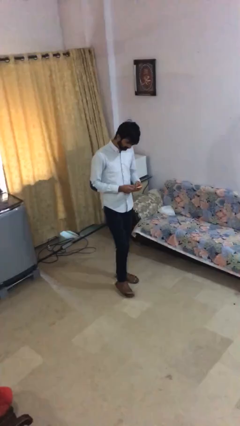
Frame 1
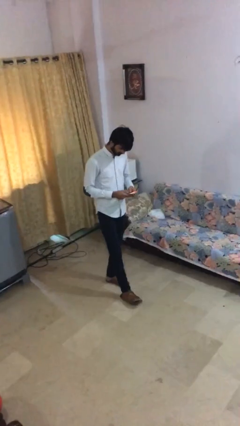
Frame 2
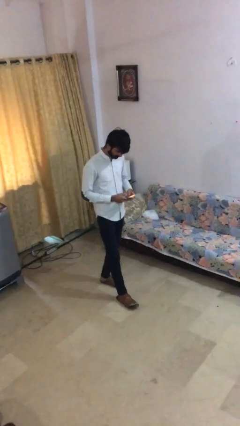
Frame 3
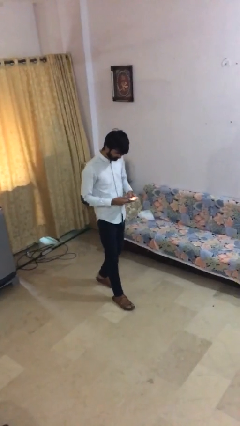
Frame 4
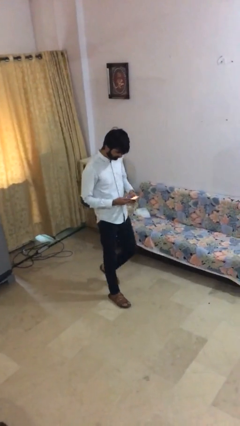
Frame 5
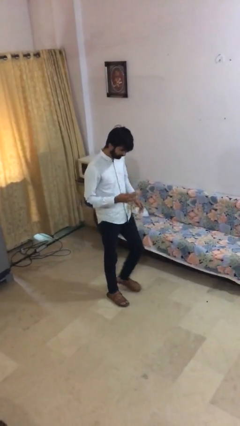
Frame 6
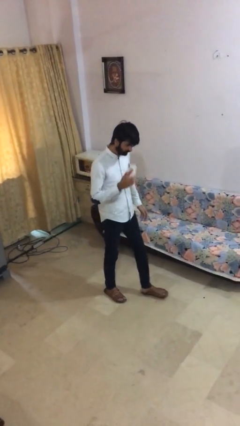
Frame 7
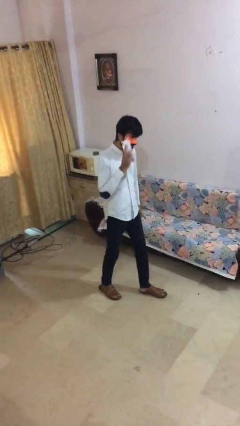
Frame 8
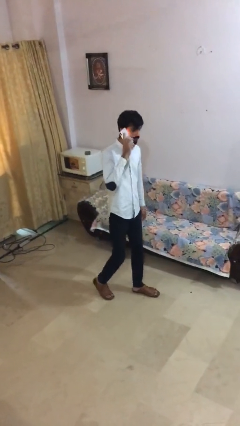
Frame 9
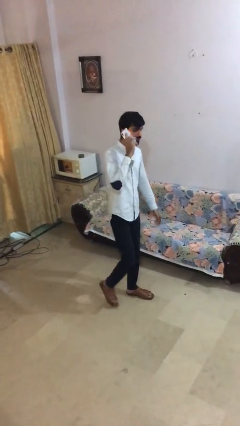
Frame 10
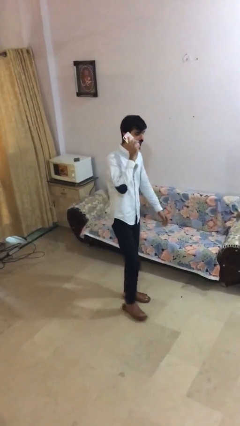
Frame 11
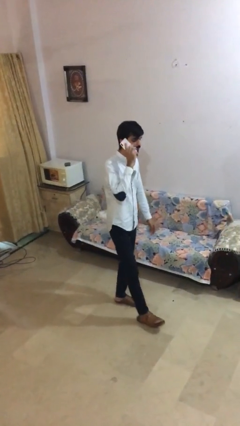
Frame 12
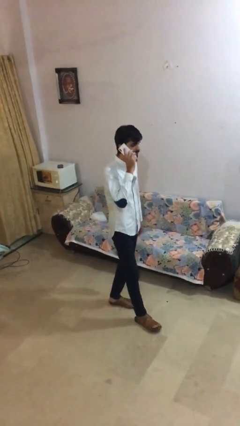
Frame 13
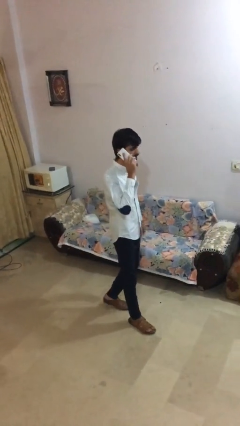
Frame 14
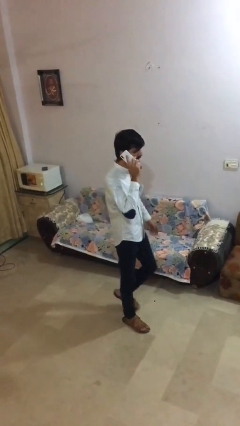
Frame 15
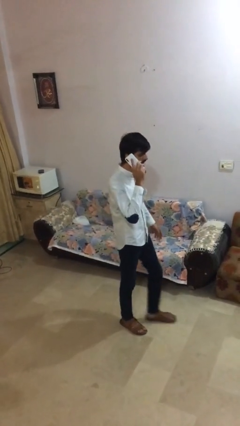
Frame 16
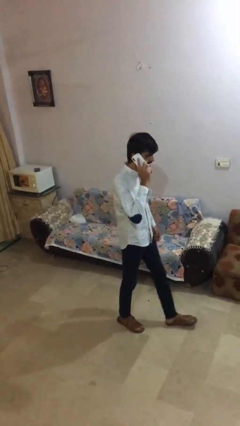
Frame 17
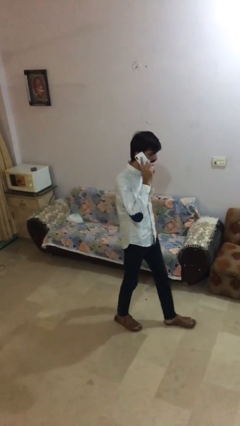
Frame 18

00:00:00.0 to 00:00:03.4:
person talks on phone

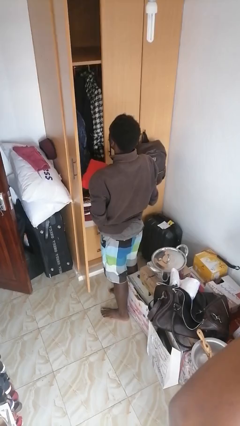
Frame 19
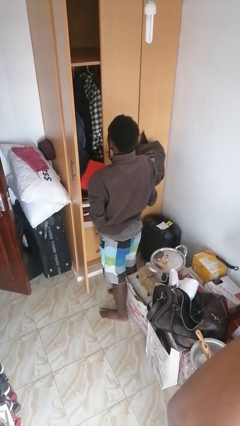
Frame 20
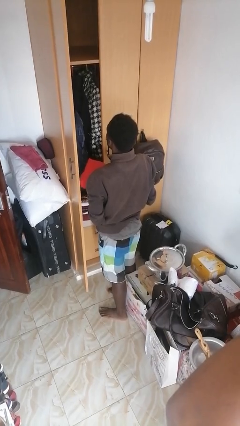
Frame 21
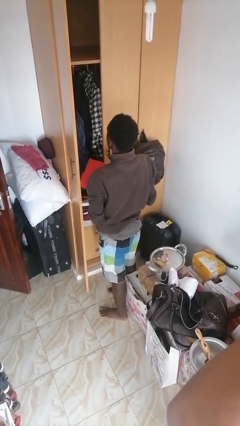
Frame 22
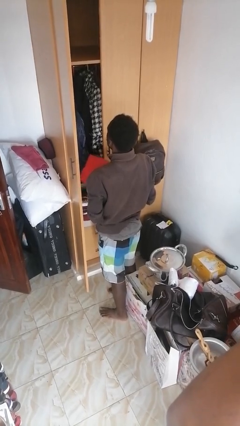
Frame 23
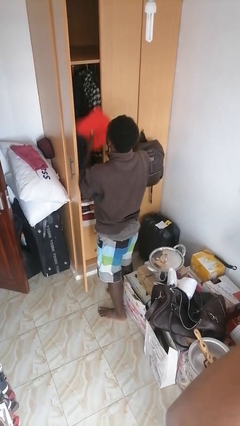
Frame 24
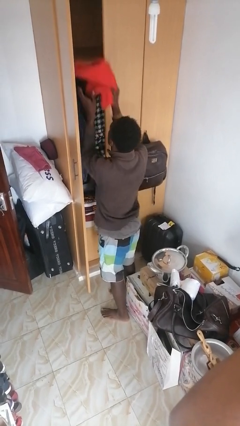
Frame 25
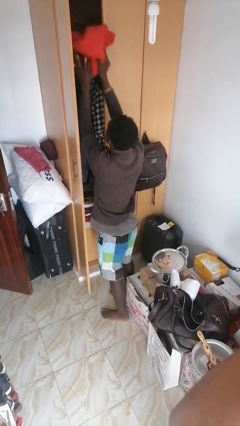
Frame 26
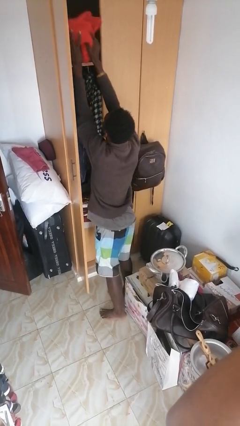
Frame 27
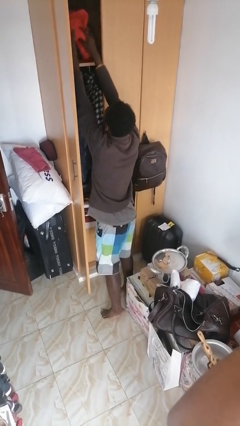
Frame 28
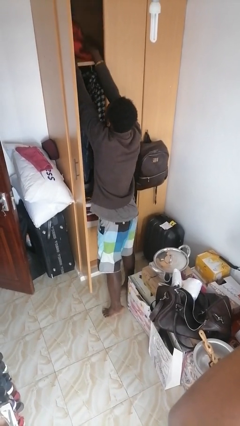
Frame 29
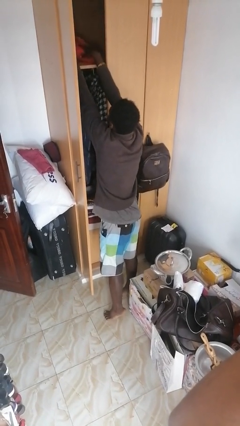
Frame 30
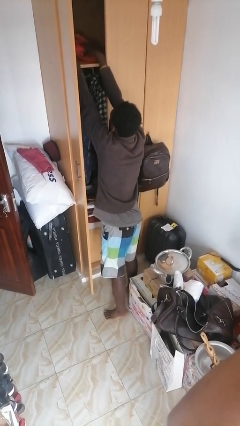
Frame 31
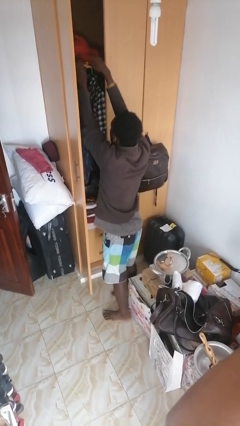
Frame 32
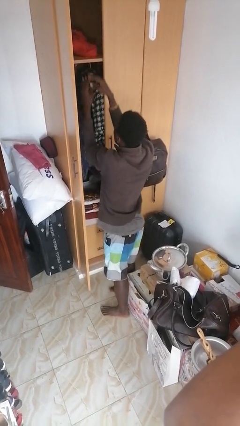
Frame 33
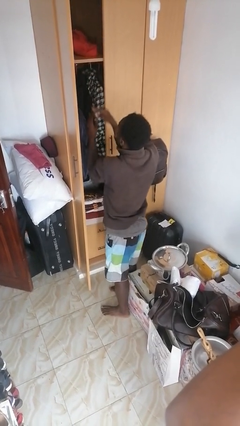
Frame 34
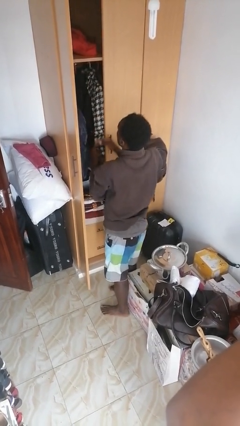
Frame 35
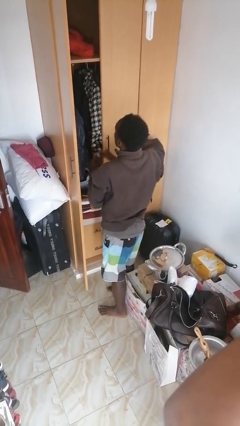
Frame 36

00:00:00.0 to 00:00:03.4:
person puts down object on shelf

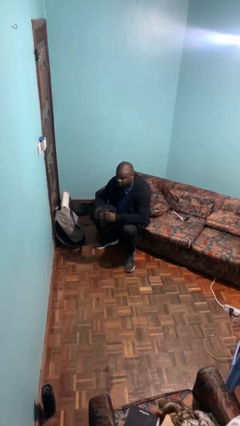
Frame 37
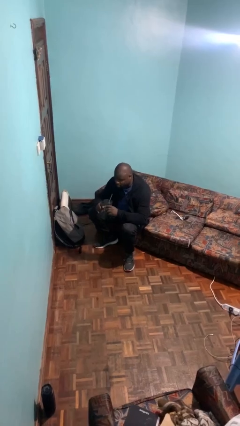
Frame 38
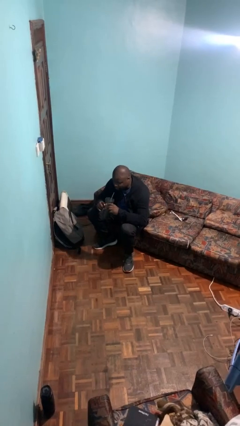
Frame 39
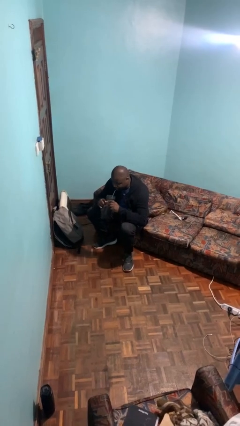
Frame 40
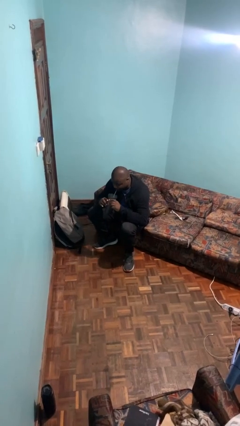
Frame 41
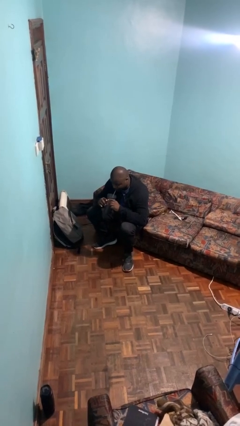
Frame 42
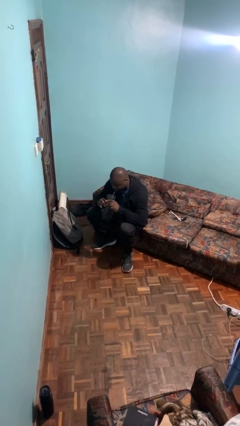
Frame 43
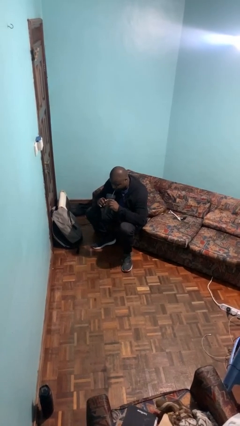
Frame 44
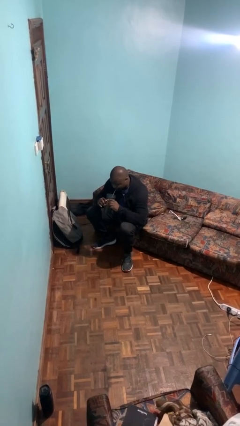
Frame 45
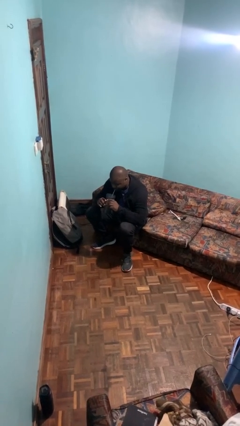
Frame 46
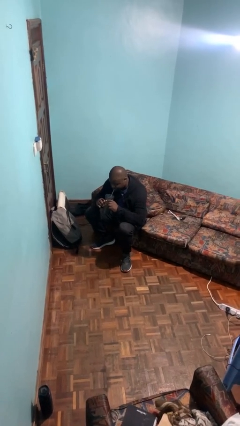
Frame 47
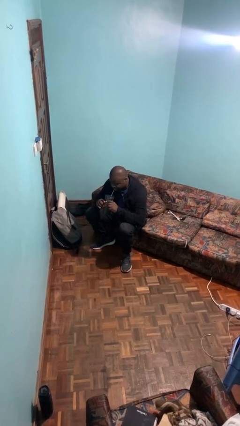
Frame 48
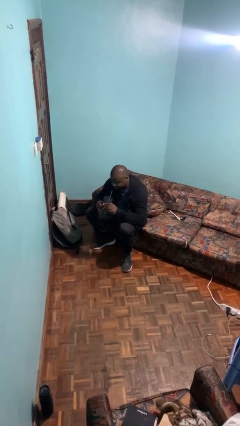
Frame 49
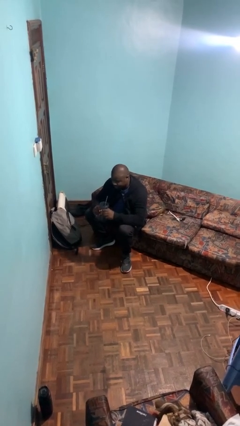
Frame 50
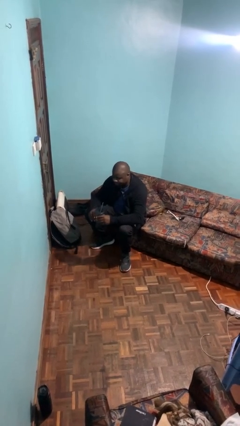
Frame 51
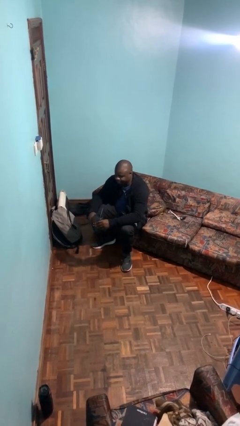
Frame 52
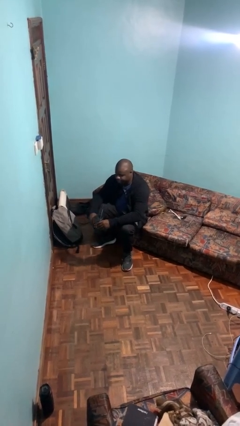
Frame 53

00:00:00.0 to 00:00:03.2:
person drinks from straw

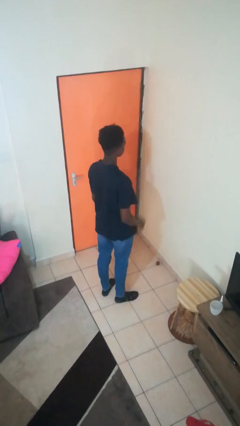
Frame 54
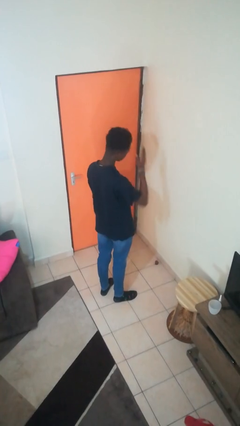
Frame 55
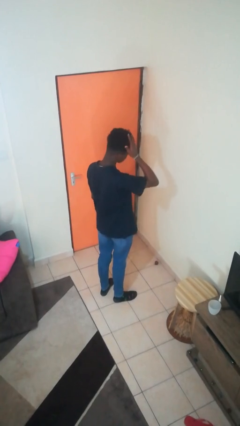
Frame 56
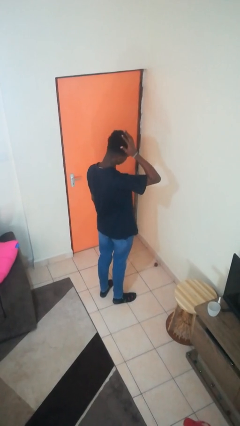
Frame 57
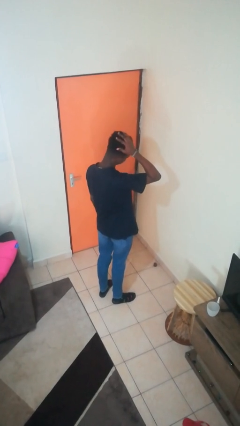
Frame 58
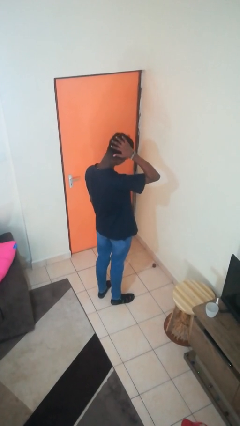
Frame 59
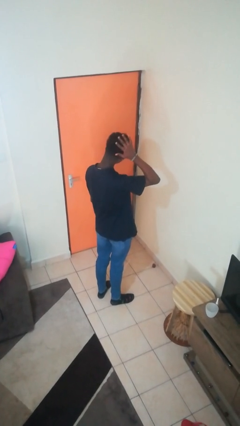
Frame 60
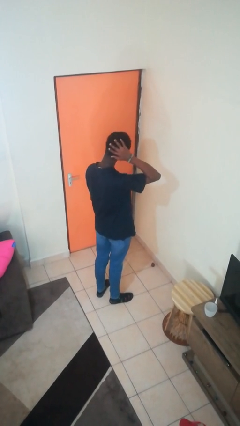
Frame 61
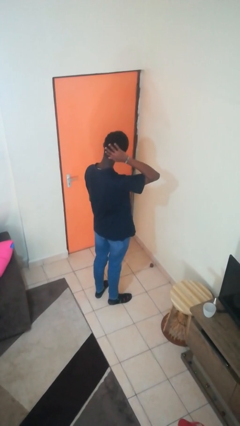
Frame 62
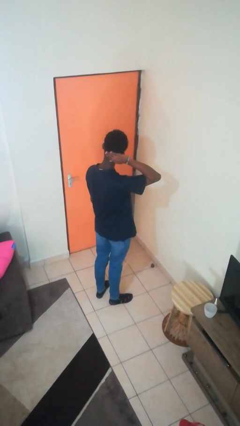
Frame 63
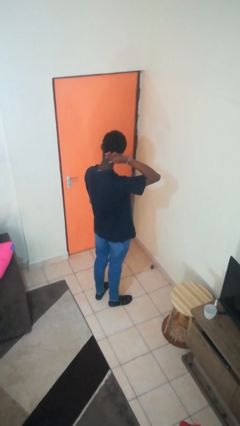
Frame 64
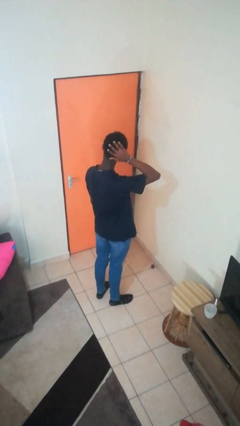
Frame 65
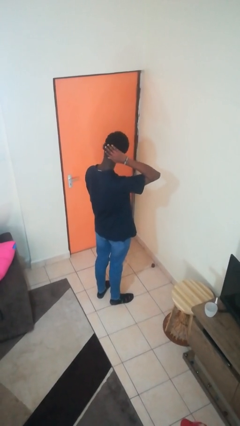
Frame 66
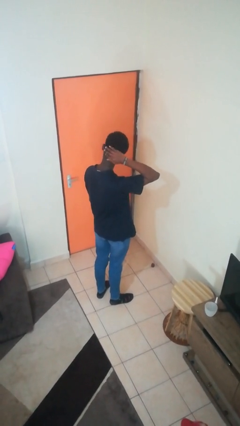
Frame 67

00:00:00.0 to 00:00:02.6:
person strokes hair

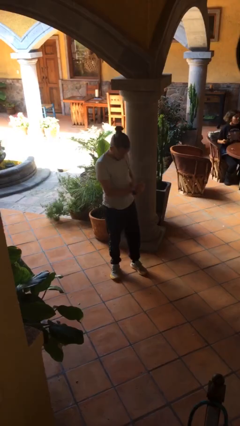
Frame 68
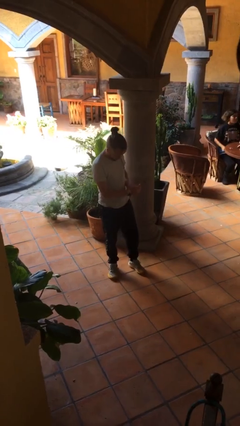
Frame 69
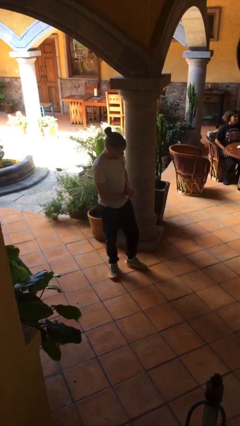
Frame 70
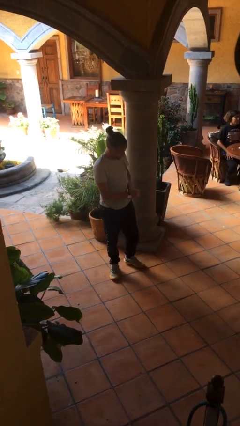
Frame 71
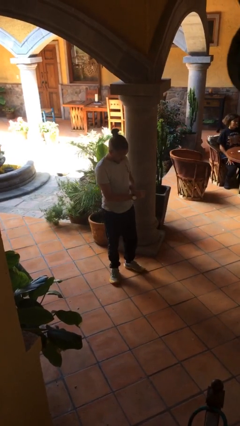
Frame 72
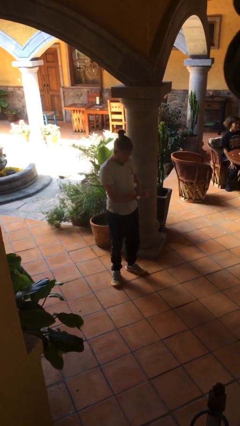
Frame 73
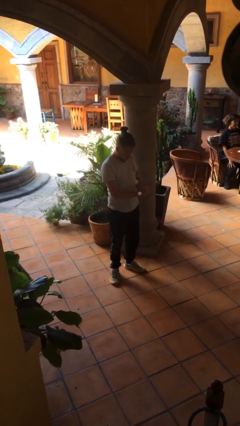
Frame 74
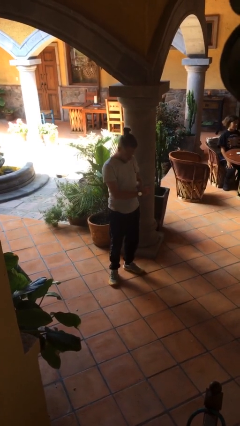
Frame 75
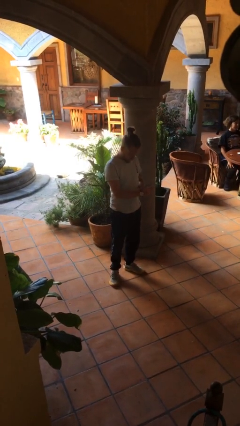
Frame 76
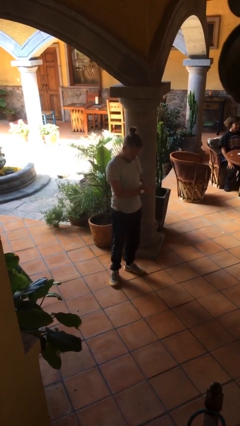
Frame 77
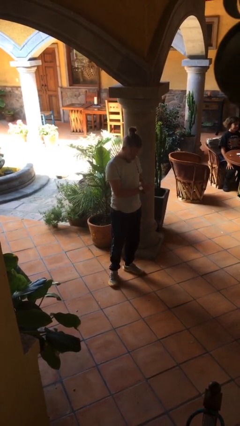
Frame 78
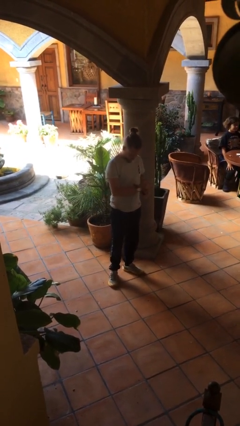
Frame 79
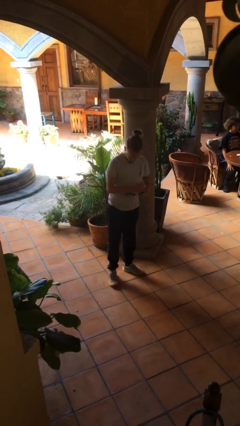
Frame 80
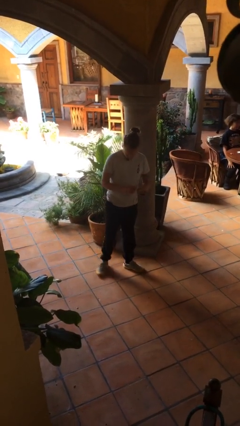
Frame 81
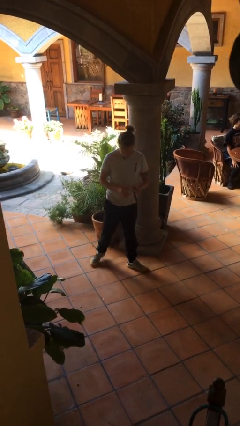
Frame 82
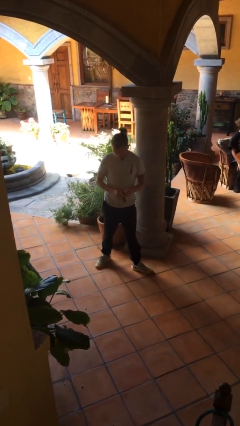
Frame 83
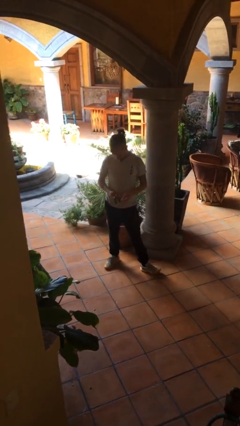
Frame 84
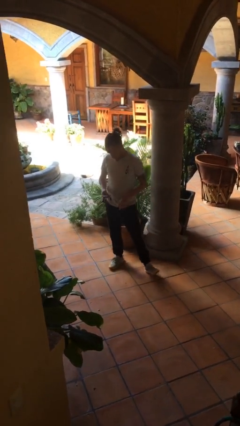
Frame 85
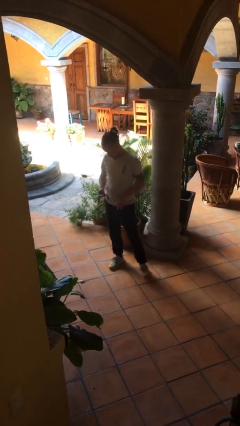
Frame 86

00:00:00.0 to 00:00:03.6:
person takes off wristwatch

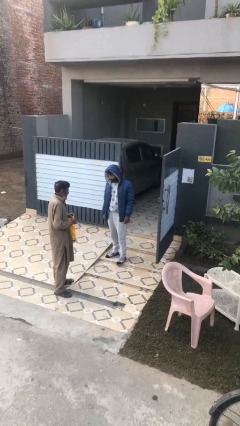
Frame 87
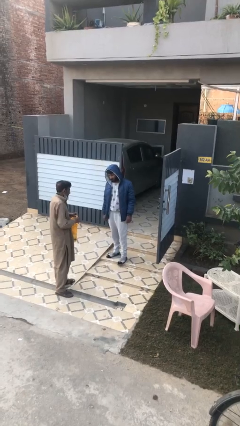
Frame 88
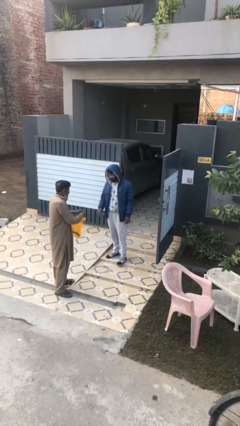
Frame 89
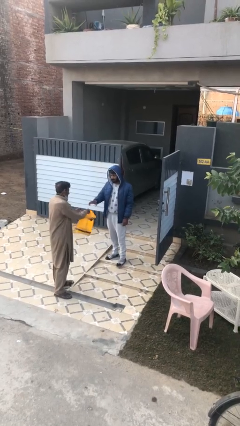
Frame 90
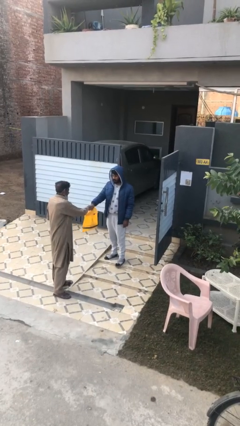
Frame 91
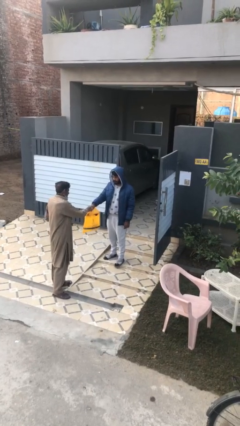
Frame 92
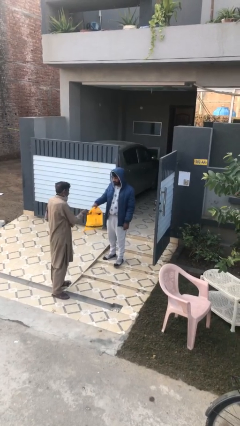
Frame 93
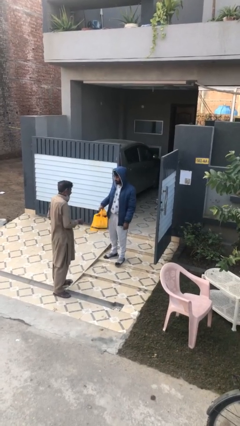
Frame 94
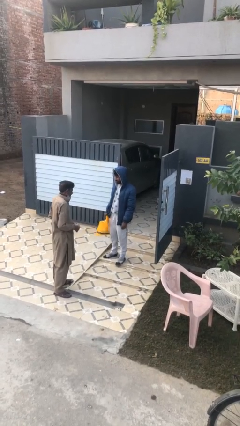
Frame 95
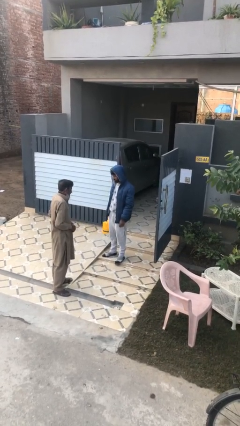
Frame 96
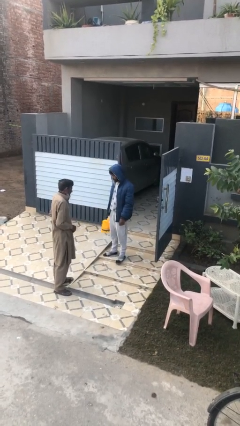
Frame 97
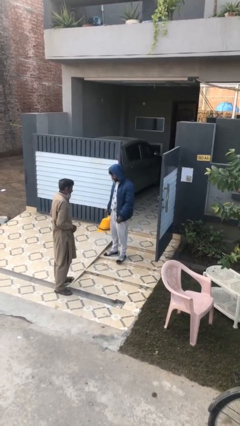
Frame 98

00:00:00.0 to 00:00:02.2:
person transfers object to person
